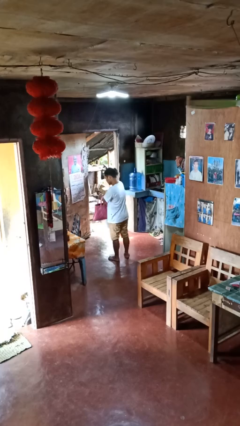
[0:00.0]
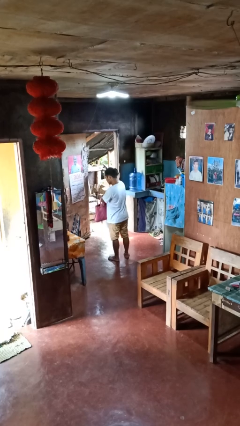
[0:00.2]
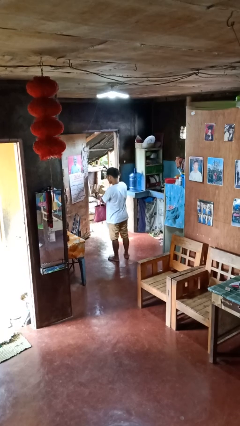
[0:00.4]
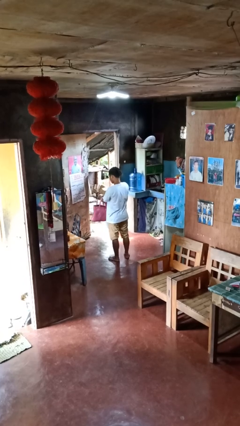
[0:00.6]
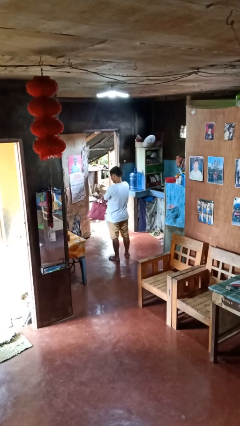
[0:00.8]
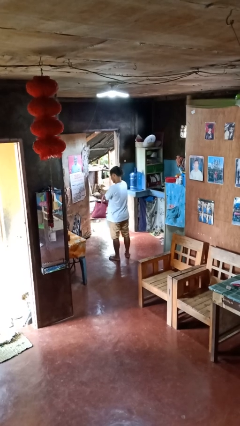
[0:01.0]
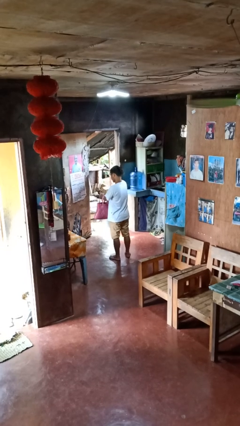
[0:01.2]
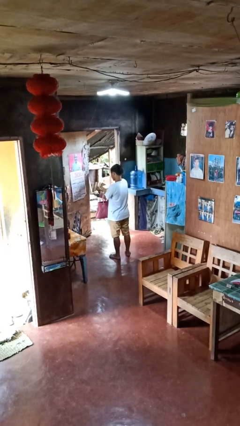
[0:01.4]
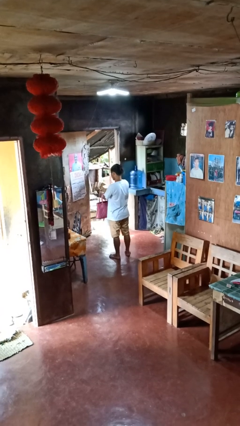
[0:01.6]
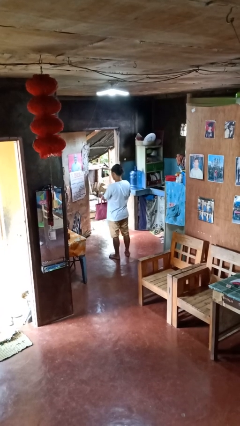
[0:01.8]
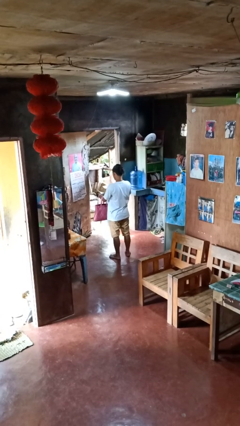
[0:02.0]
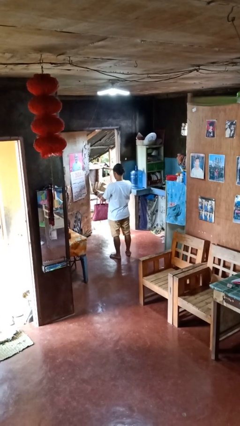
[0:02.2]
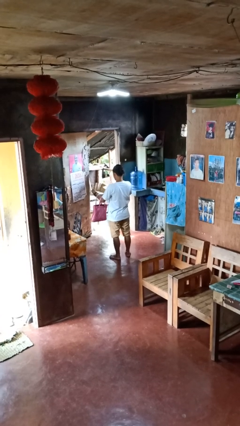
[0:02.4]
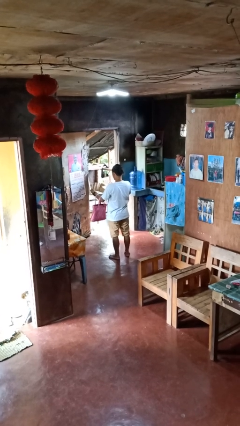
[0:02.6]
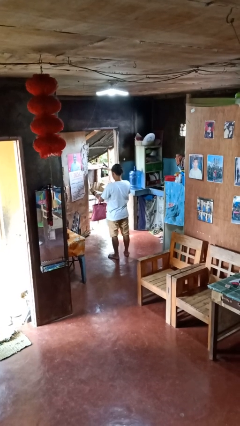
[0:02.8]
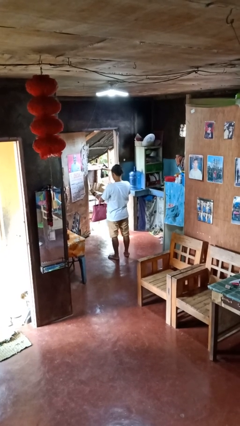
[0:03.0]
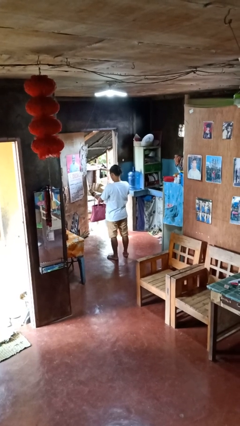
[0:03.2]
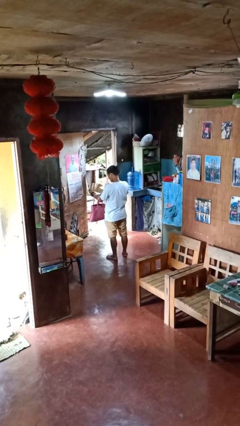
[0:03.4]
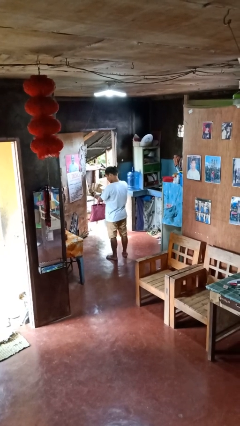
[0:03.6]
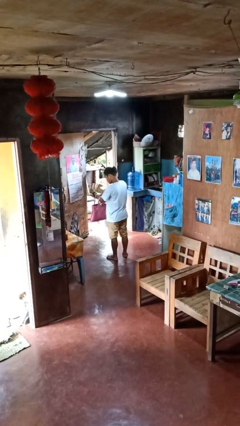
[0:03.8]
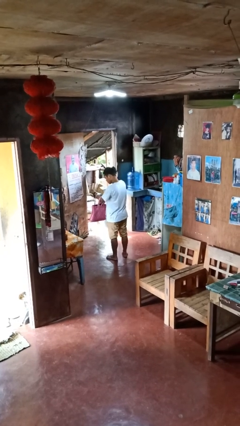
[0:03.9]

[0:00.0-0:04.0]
person takes object from purse

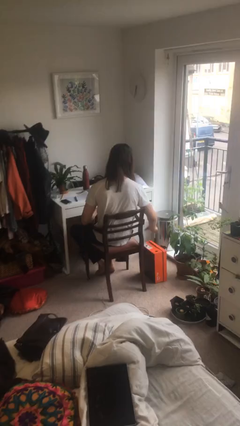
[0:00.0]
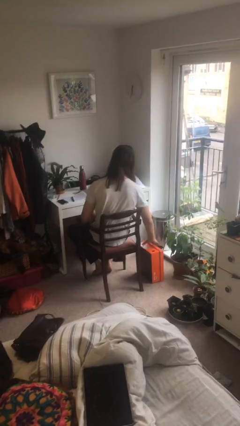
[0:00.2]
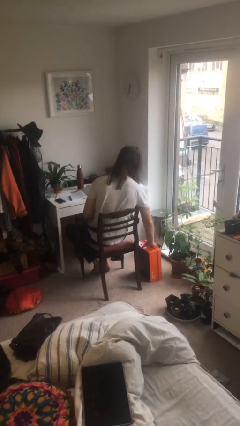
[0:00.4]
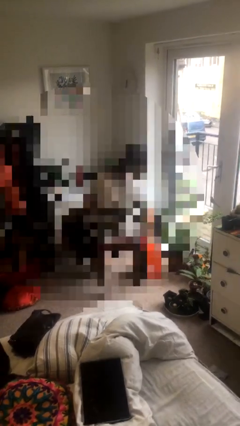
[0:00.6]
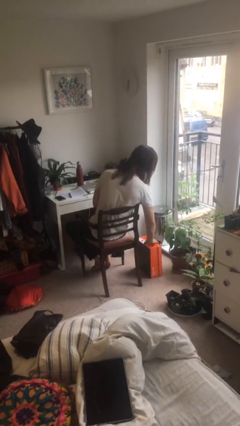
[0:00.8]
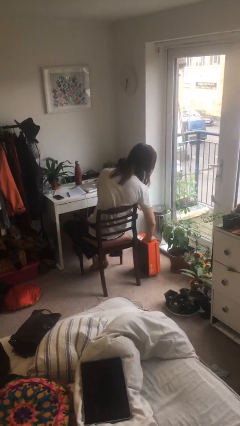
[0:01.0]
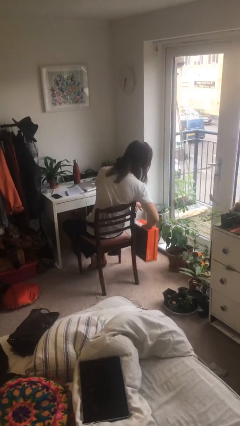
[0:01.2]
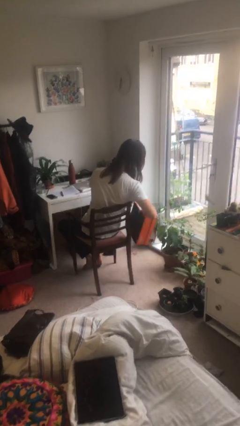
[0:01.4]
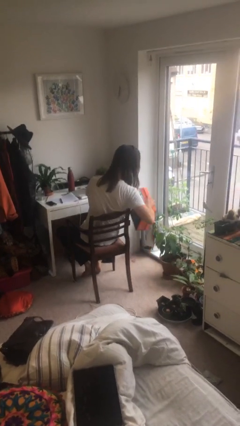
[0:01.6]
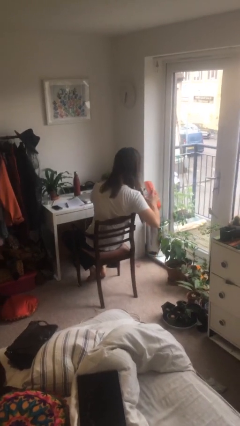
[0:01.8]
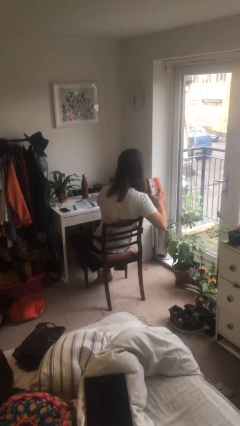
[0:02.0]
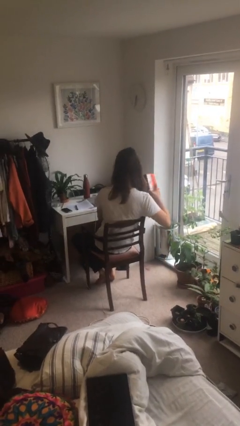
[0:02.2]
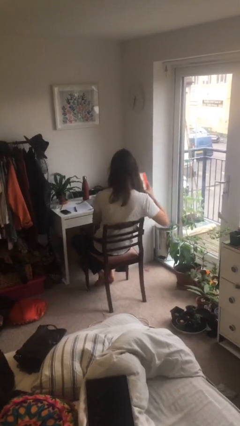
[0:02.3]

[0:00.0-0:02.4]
person picks up object from floor

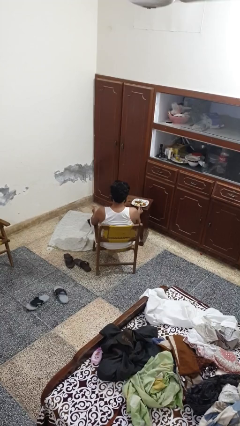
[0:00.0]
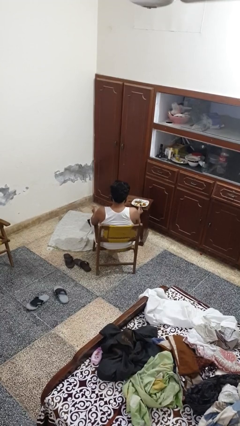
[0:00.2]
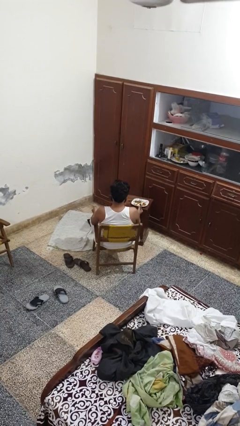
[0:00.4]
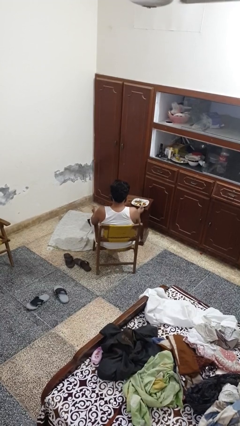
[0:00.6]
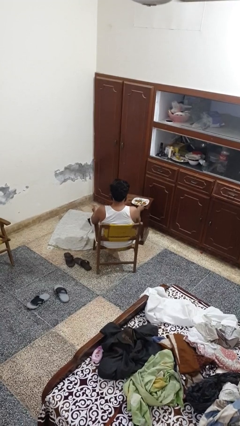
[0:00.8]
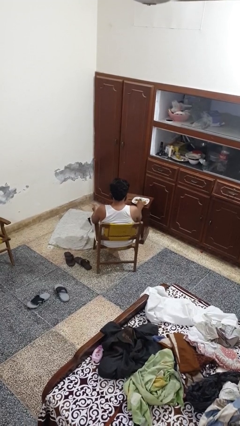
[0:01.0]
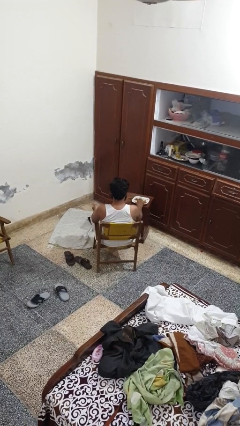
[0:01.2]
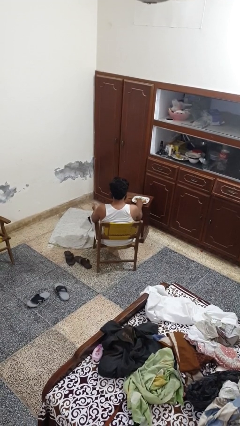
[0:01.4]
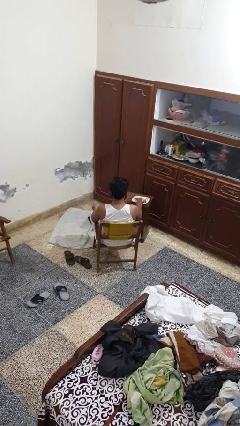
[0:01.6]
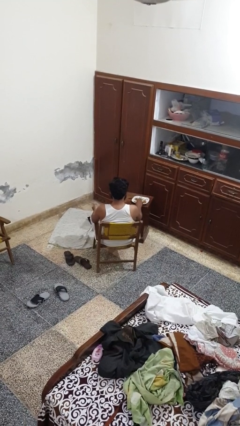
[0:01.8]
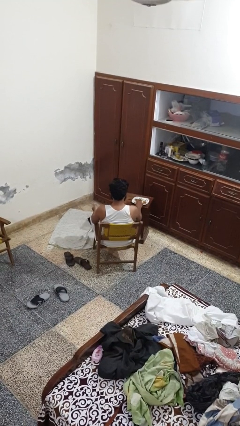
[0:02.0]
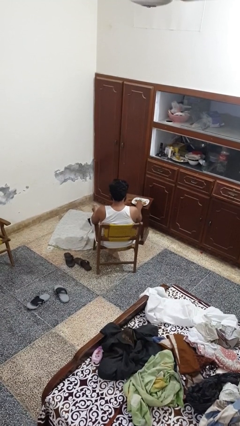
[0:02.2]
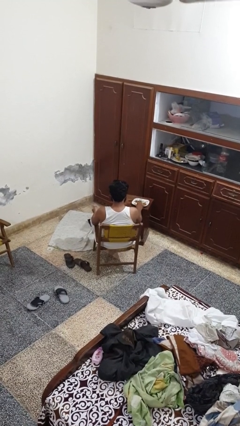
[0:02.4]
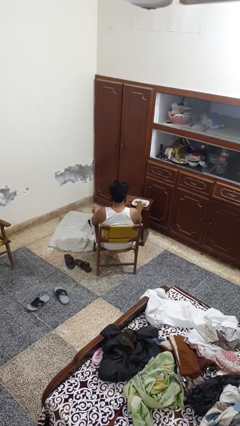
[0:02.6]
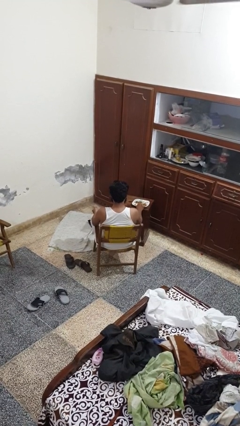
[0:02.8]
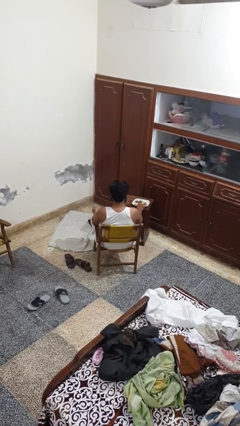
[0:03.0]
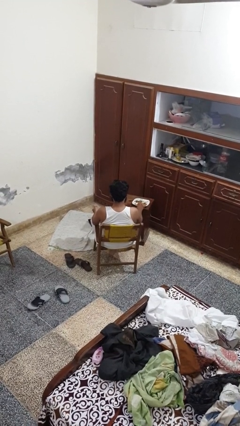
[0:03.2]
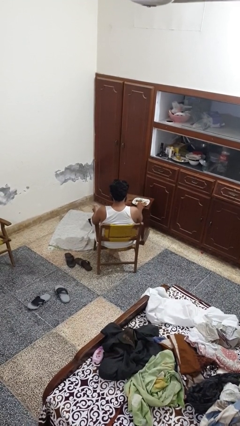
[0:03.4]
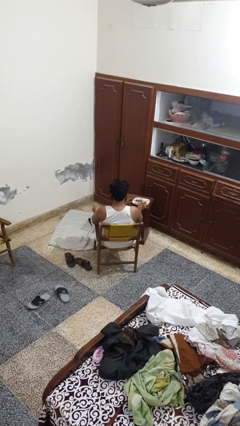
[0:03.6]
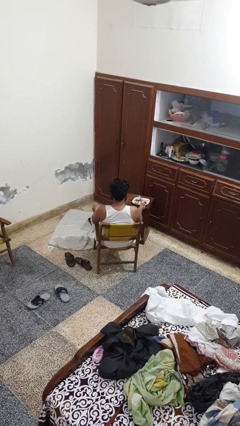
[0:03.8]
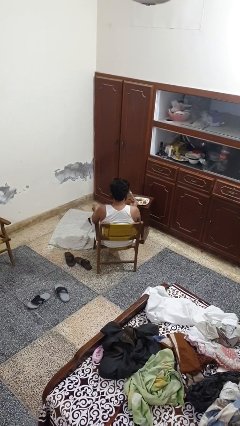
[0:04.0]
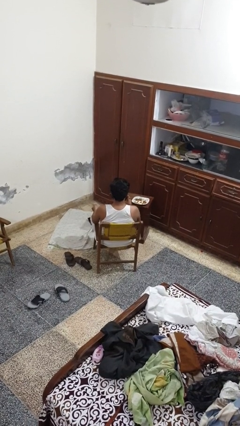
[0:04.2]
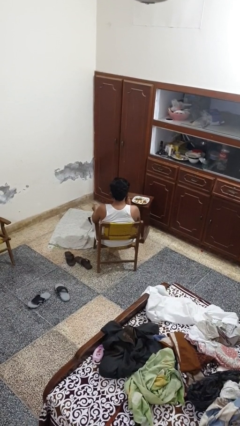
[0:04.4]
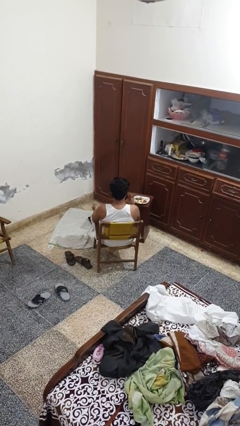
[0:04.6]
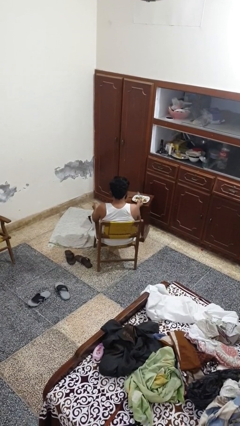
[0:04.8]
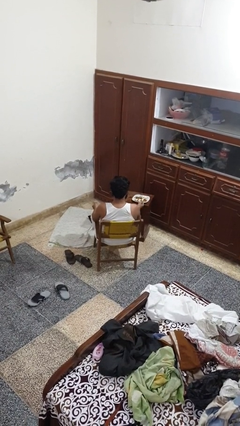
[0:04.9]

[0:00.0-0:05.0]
person eats with utensil

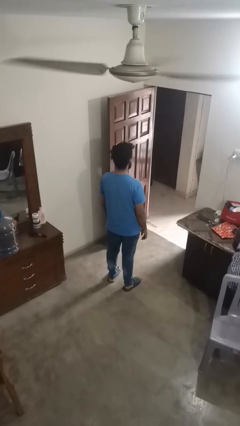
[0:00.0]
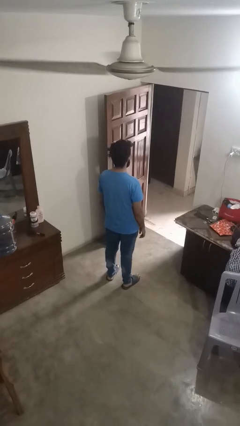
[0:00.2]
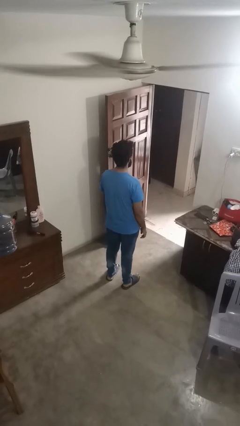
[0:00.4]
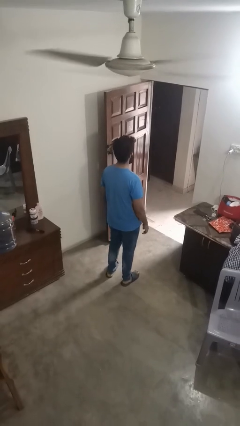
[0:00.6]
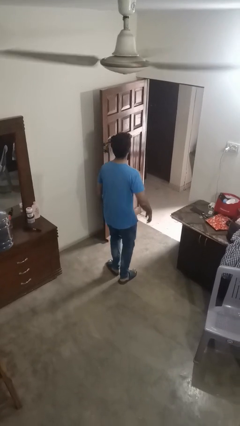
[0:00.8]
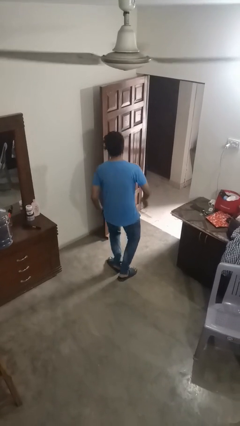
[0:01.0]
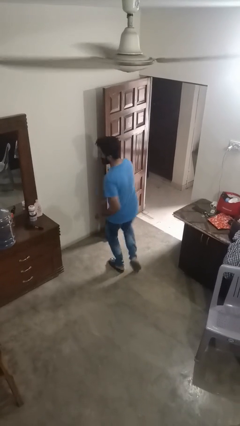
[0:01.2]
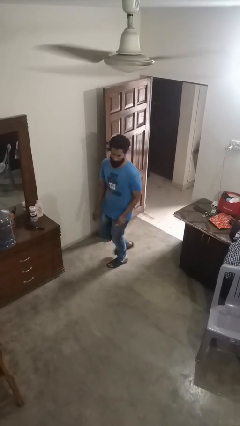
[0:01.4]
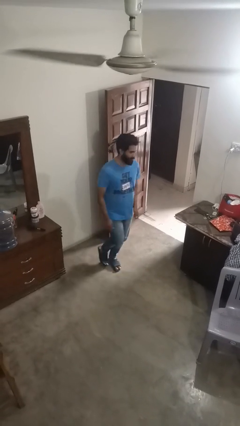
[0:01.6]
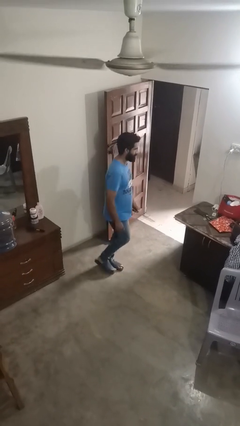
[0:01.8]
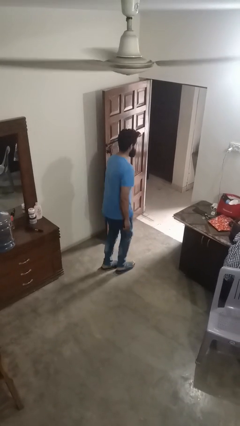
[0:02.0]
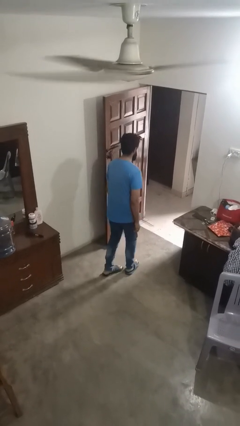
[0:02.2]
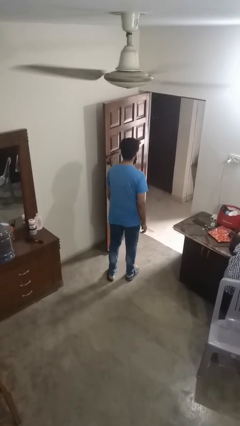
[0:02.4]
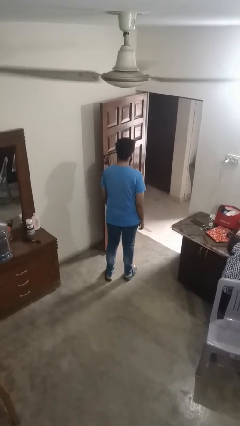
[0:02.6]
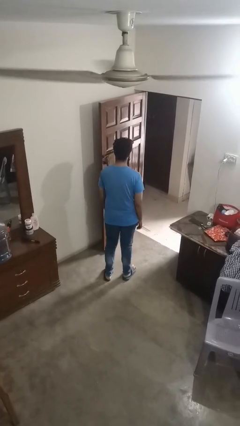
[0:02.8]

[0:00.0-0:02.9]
person twirls

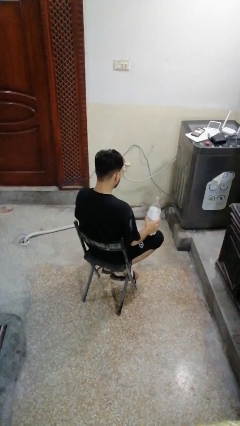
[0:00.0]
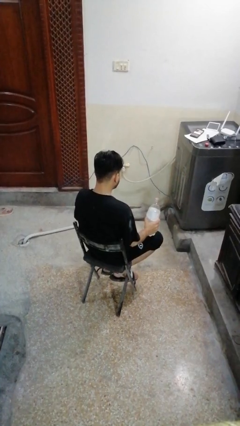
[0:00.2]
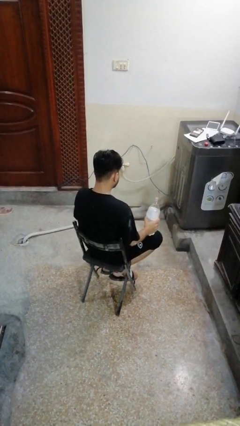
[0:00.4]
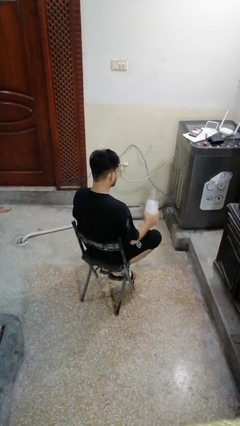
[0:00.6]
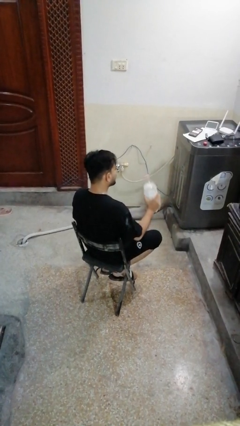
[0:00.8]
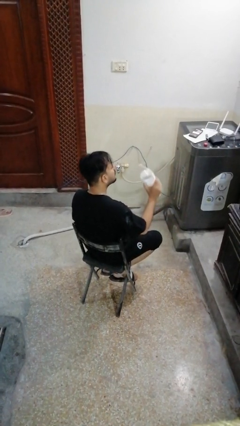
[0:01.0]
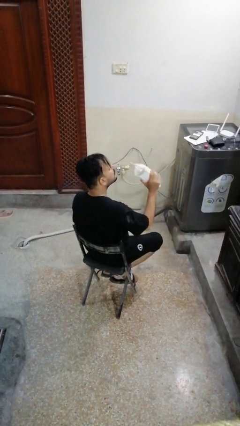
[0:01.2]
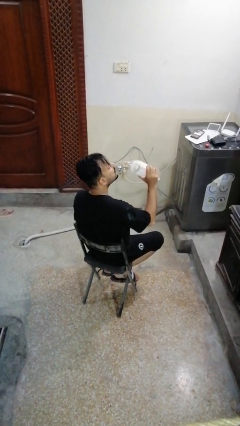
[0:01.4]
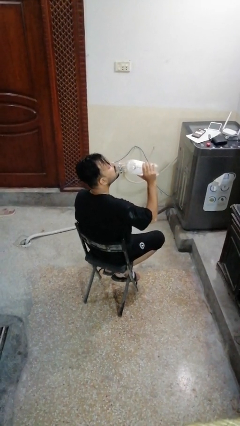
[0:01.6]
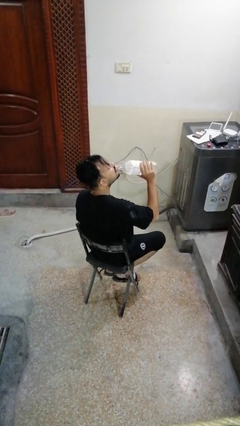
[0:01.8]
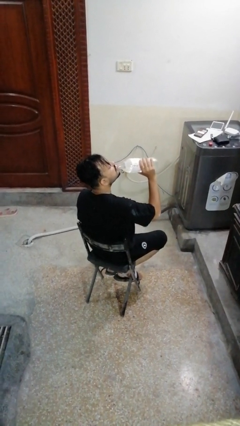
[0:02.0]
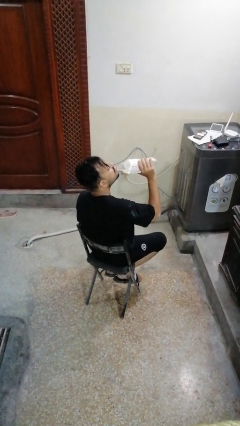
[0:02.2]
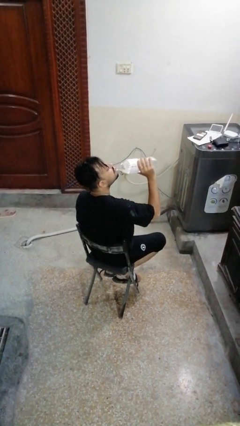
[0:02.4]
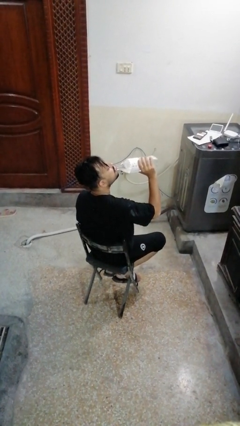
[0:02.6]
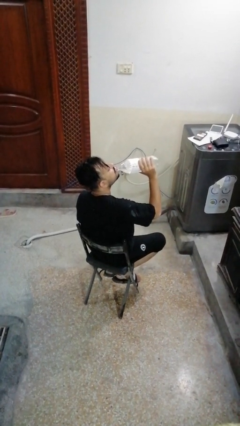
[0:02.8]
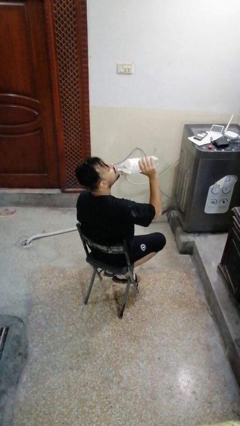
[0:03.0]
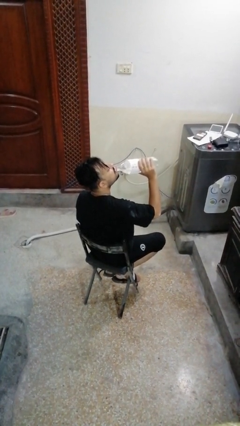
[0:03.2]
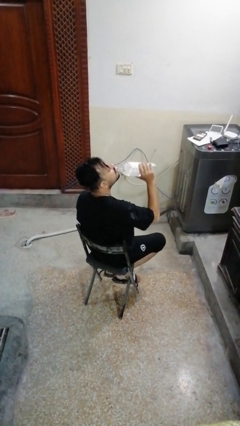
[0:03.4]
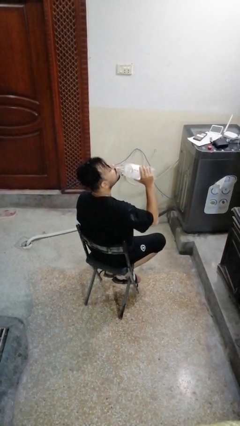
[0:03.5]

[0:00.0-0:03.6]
person drinks from bottle
